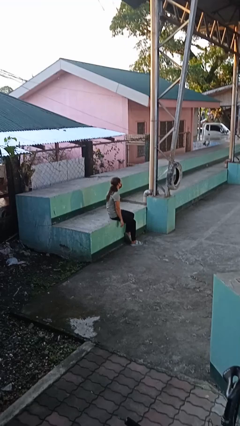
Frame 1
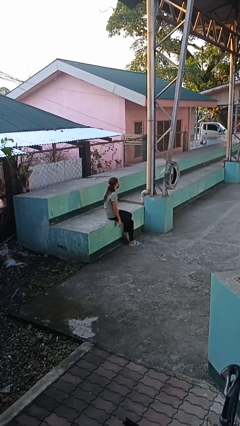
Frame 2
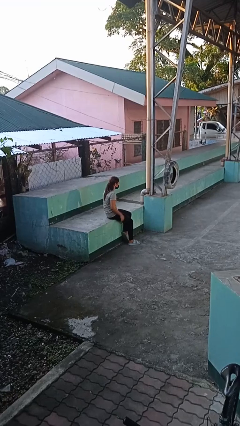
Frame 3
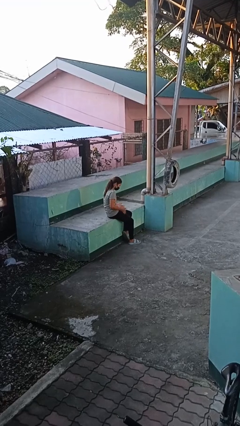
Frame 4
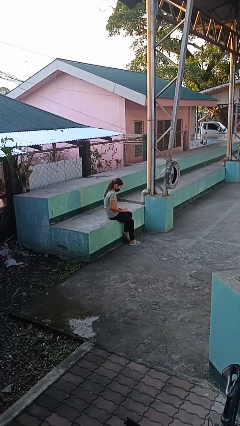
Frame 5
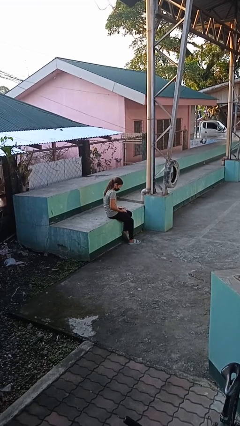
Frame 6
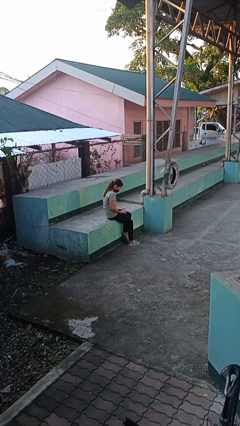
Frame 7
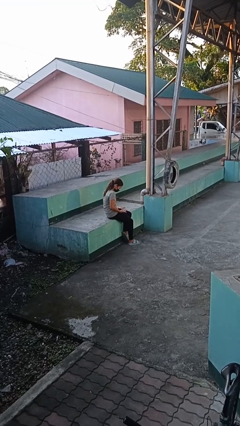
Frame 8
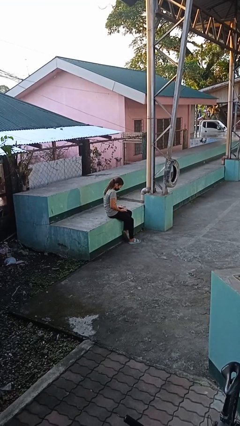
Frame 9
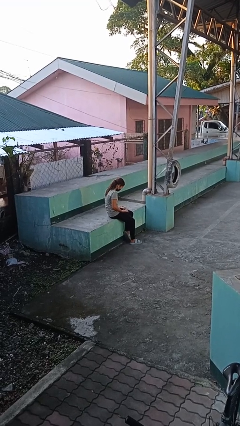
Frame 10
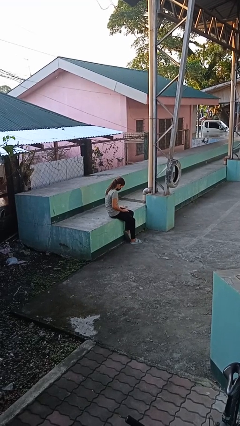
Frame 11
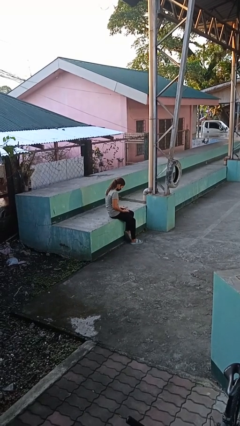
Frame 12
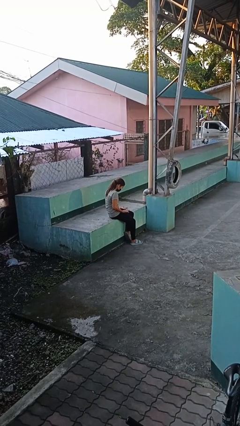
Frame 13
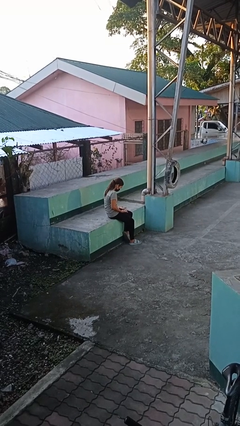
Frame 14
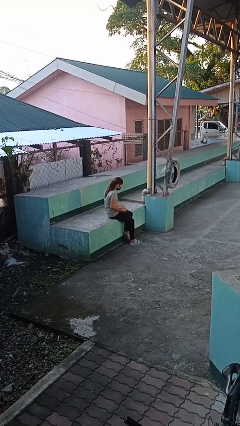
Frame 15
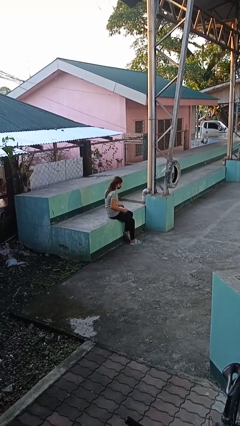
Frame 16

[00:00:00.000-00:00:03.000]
person looks at hands in lap

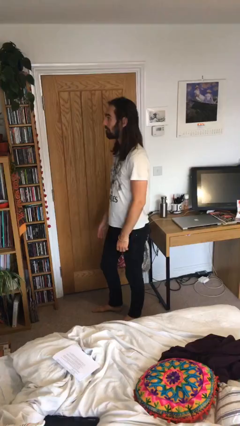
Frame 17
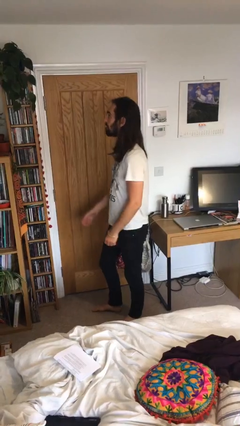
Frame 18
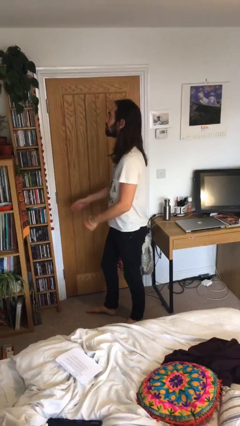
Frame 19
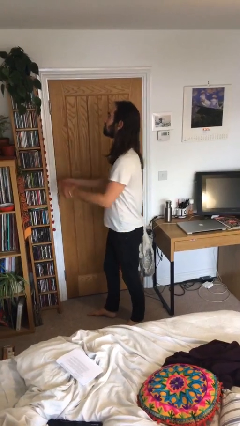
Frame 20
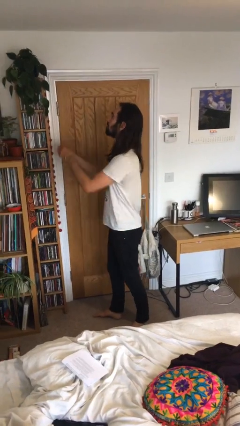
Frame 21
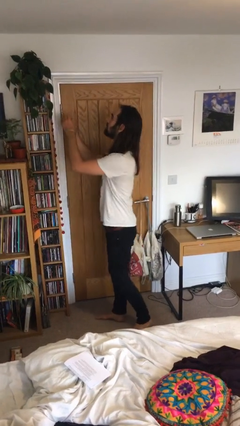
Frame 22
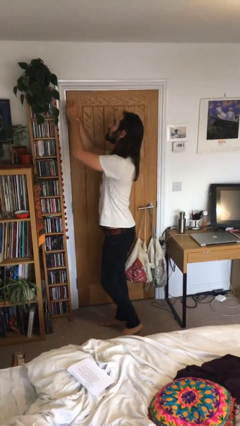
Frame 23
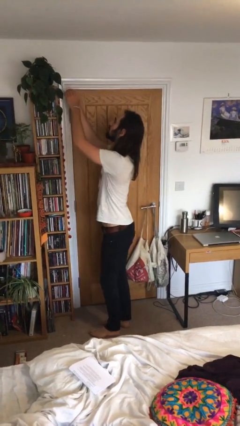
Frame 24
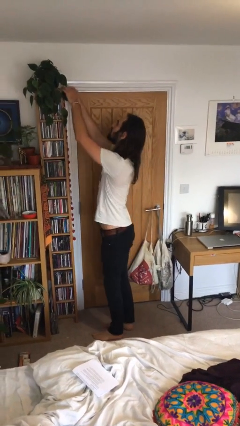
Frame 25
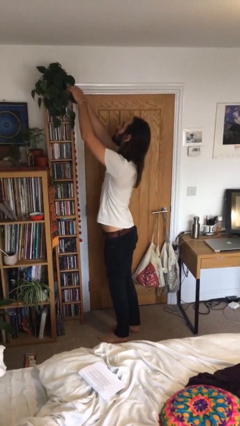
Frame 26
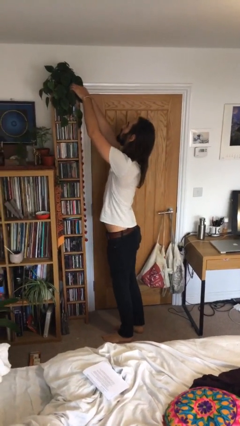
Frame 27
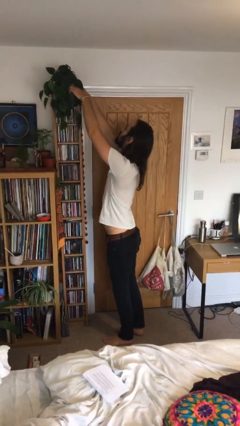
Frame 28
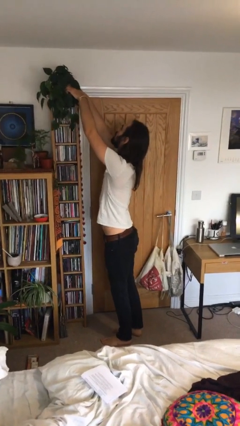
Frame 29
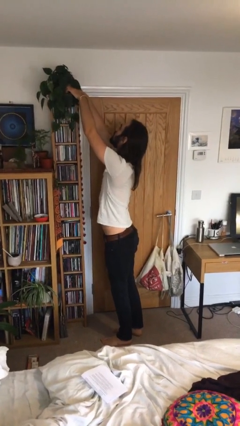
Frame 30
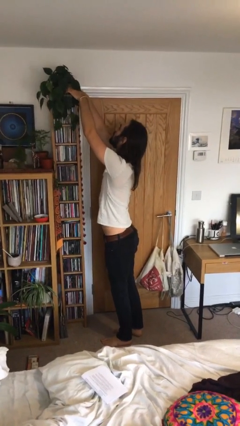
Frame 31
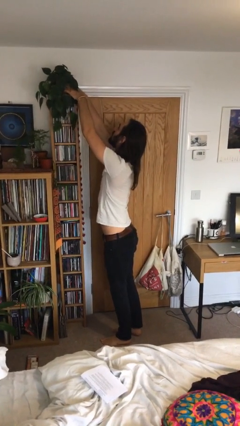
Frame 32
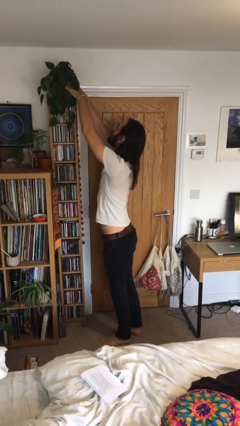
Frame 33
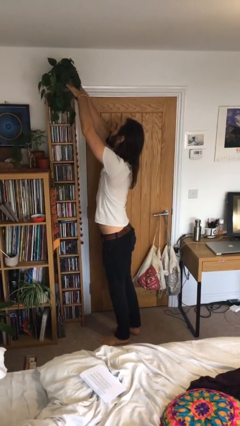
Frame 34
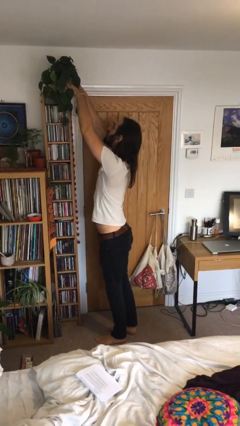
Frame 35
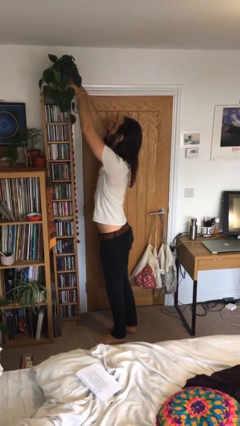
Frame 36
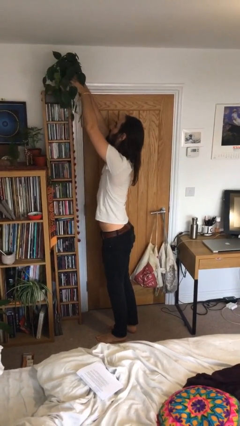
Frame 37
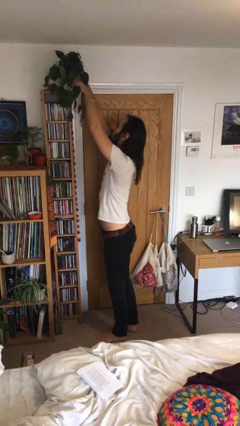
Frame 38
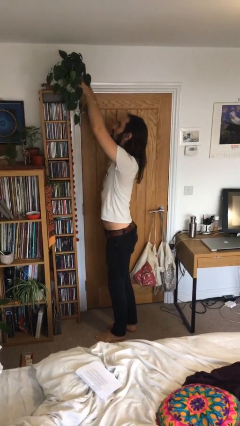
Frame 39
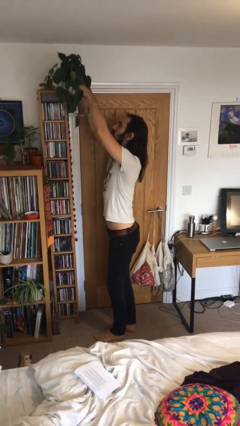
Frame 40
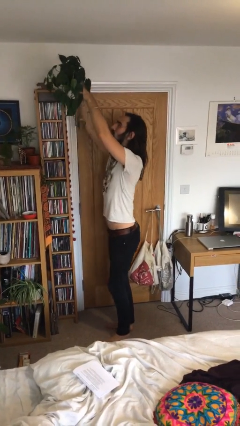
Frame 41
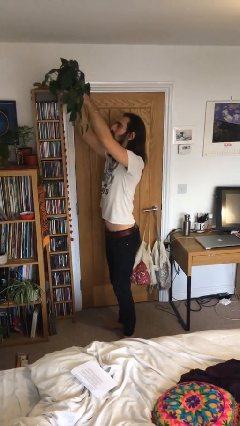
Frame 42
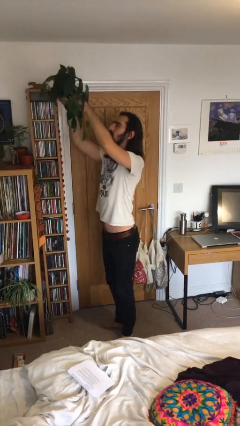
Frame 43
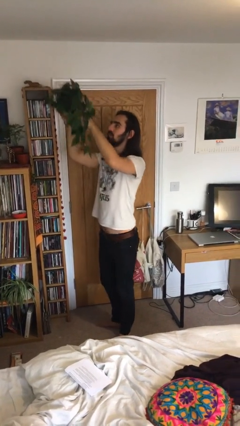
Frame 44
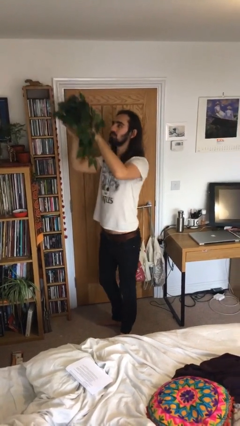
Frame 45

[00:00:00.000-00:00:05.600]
person picks up object from shelf

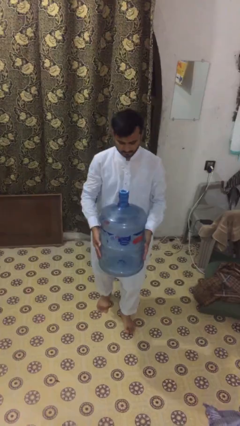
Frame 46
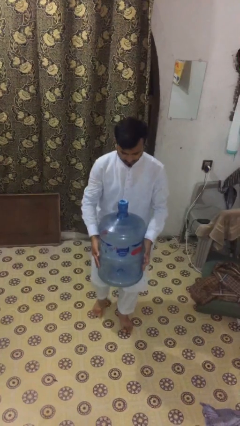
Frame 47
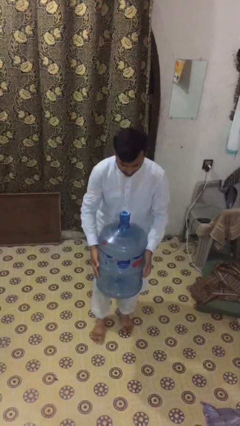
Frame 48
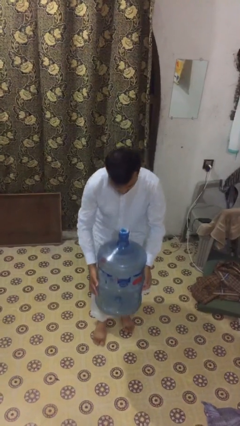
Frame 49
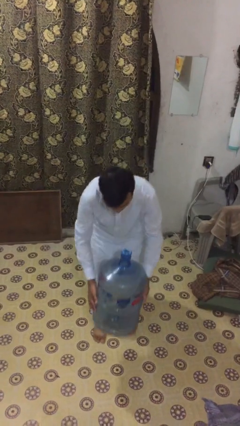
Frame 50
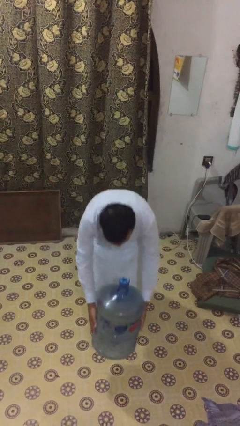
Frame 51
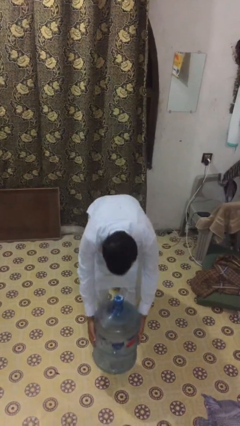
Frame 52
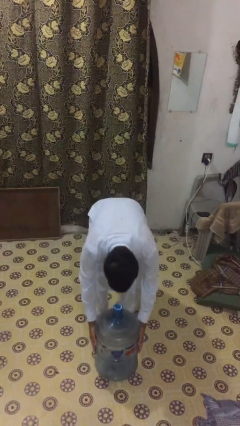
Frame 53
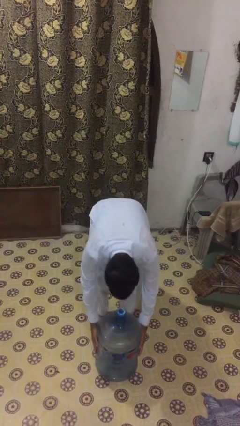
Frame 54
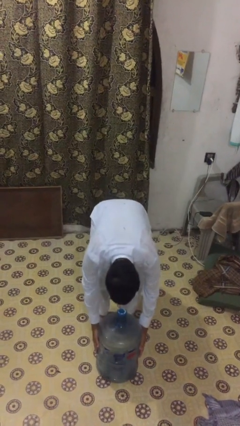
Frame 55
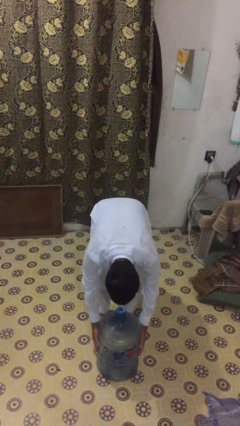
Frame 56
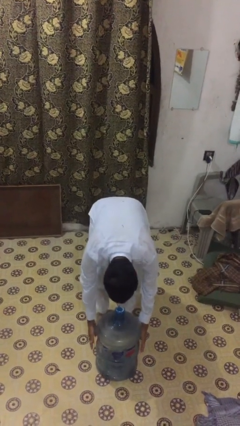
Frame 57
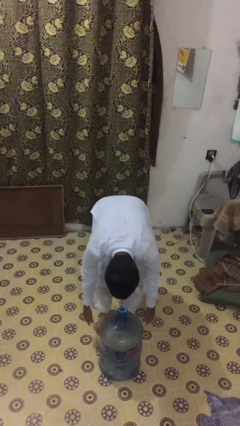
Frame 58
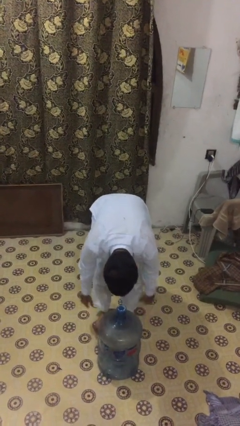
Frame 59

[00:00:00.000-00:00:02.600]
person puts down object on floor

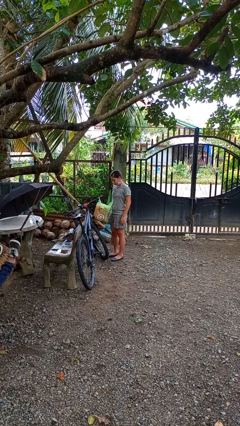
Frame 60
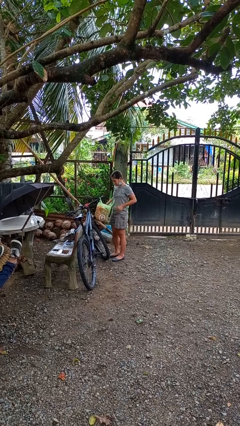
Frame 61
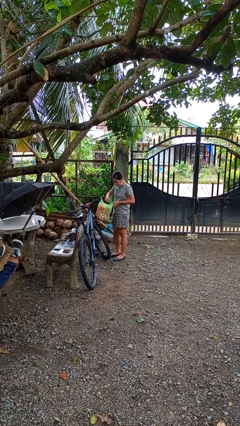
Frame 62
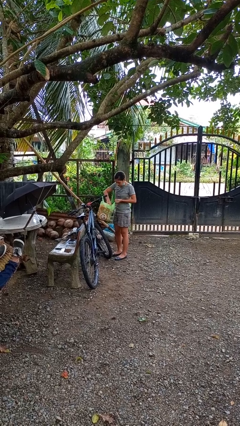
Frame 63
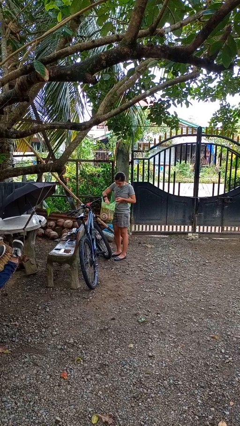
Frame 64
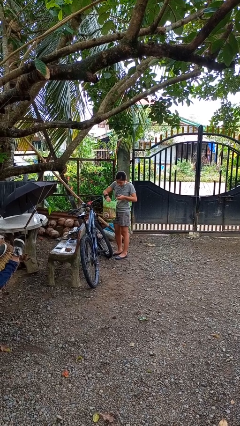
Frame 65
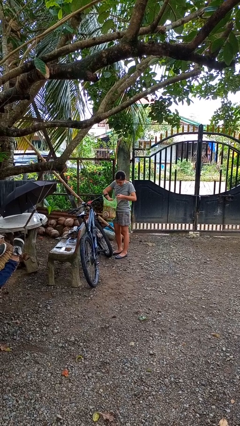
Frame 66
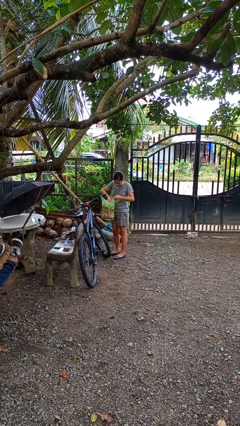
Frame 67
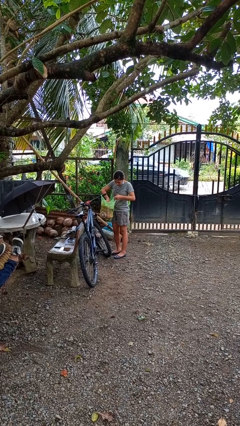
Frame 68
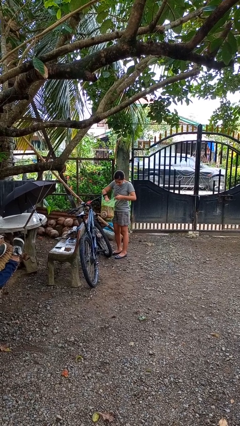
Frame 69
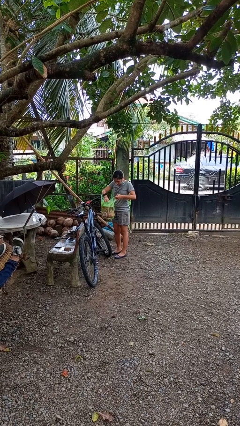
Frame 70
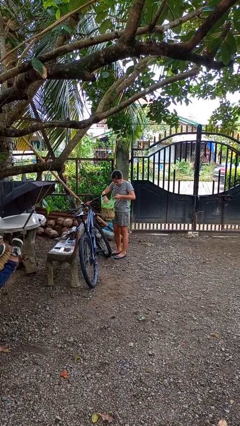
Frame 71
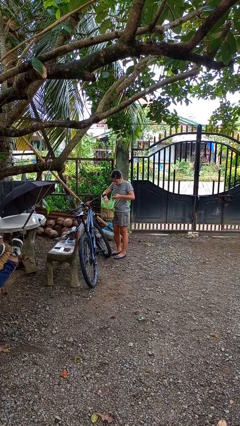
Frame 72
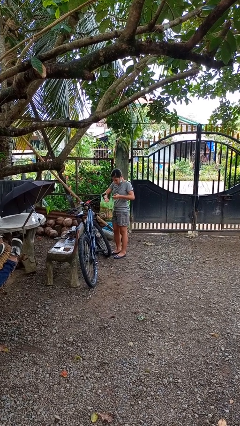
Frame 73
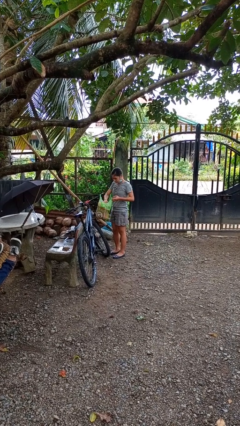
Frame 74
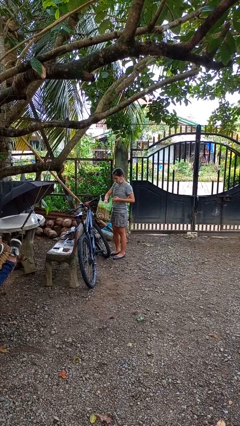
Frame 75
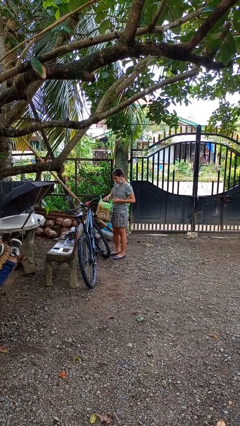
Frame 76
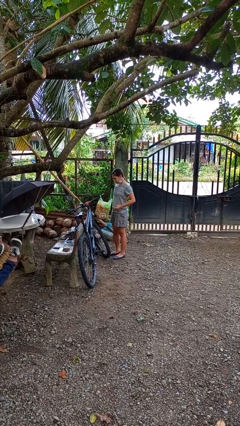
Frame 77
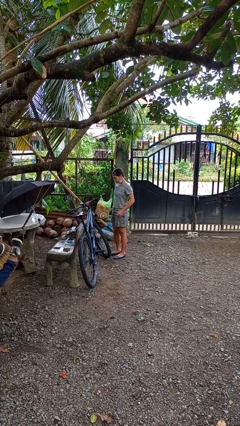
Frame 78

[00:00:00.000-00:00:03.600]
person searches in bag

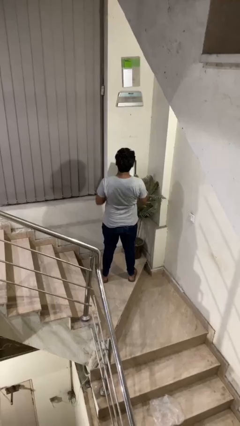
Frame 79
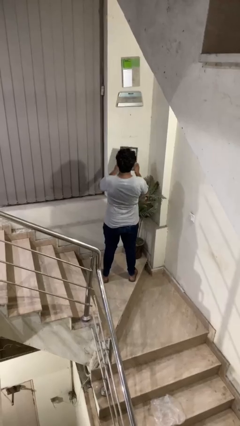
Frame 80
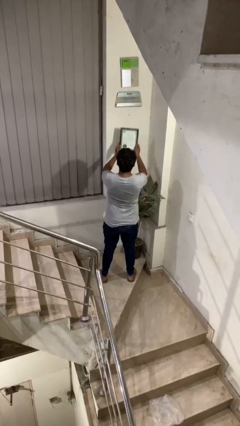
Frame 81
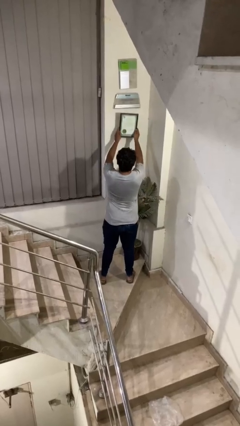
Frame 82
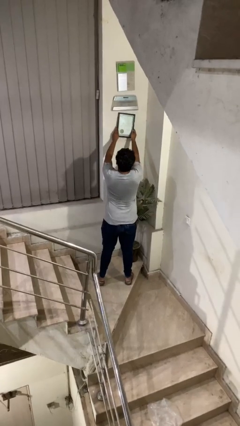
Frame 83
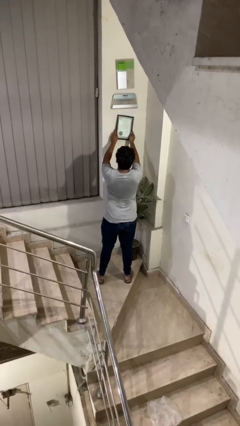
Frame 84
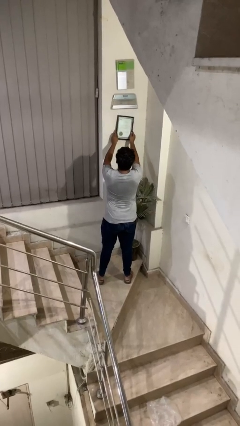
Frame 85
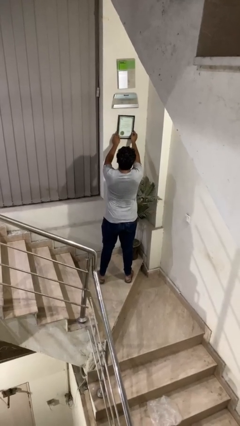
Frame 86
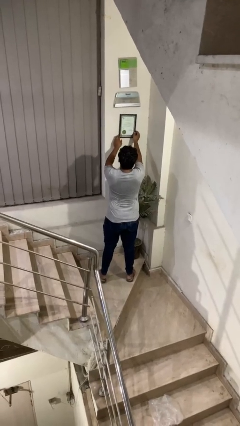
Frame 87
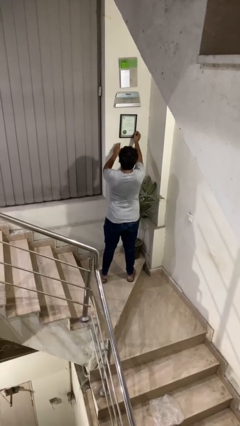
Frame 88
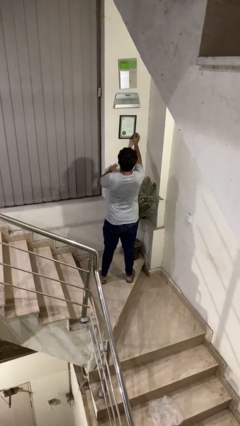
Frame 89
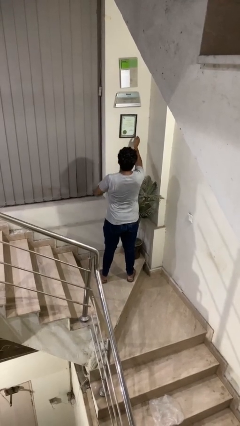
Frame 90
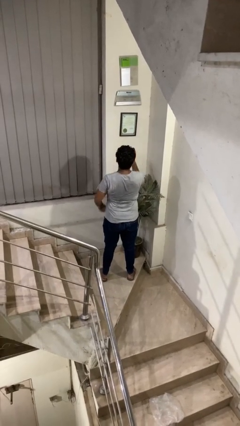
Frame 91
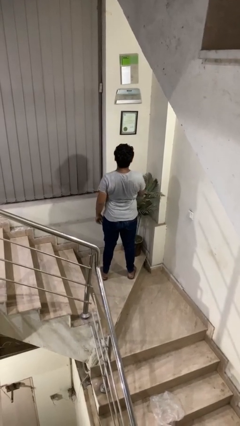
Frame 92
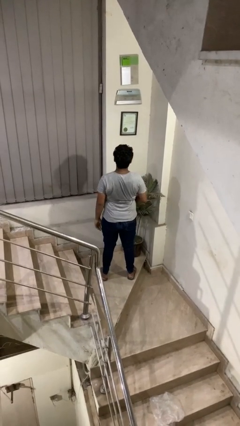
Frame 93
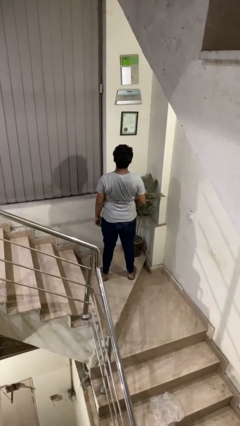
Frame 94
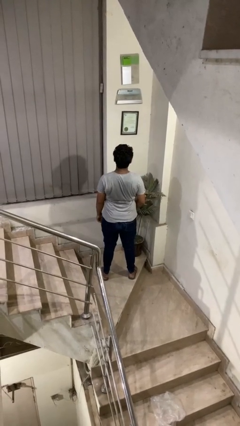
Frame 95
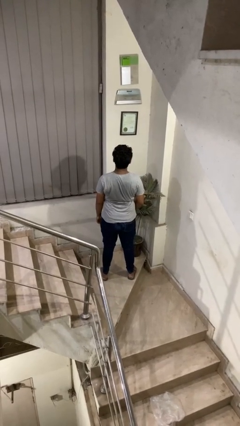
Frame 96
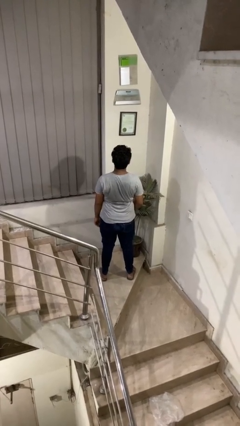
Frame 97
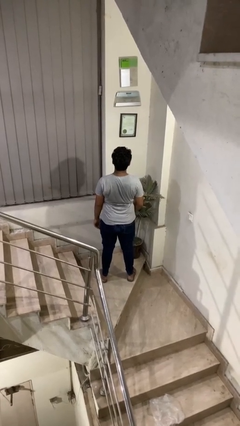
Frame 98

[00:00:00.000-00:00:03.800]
person puts up picture frame
